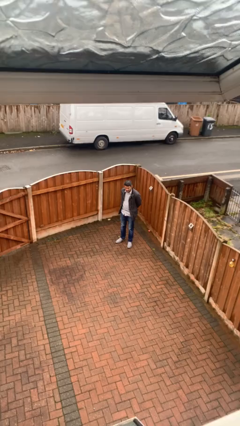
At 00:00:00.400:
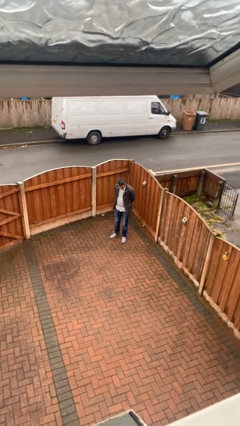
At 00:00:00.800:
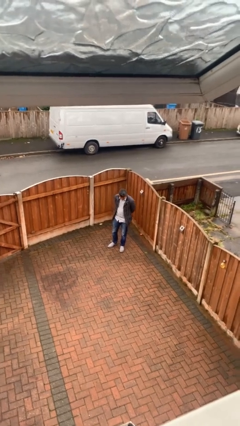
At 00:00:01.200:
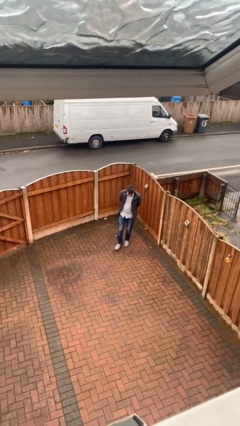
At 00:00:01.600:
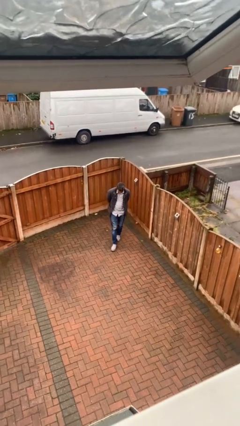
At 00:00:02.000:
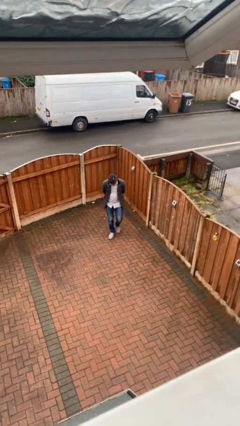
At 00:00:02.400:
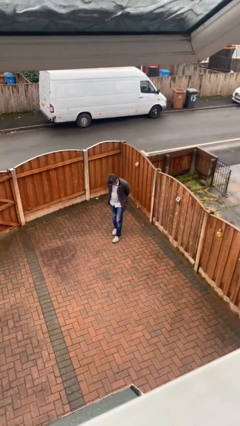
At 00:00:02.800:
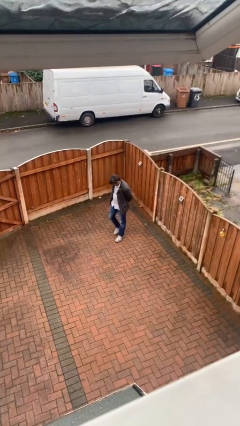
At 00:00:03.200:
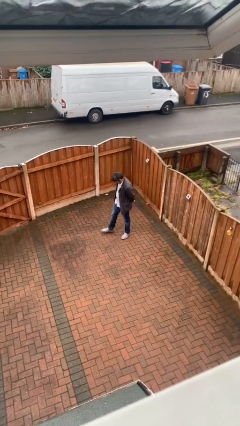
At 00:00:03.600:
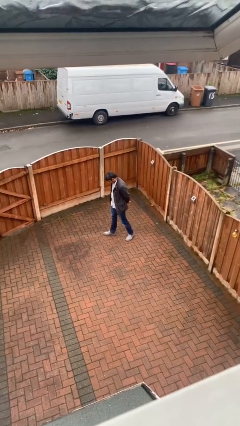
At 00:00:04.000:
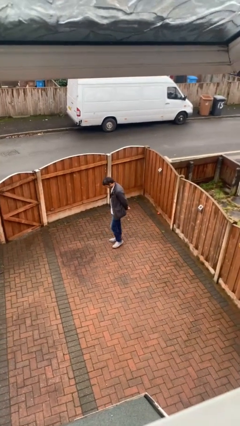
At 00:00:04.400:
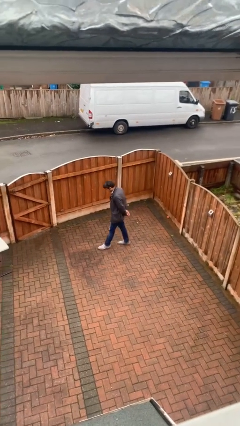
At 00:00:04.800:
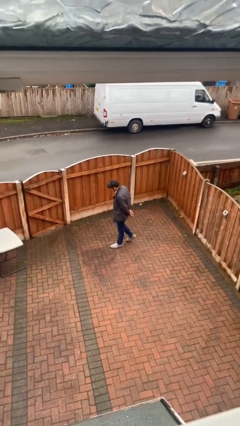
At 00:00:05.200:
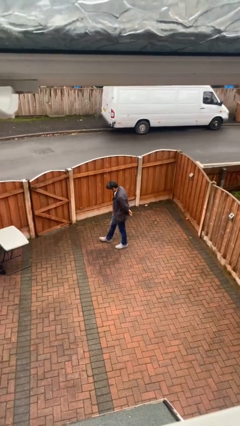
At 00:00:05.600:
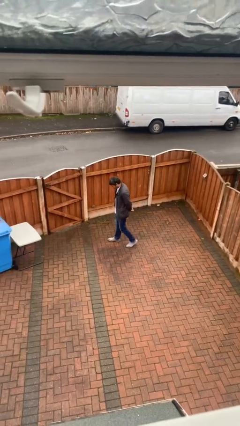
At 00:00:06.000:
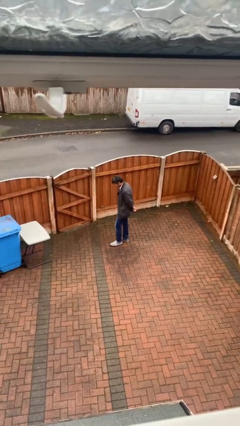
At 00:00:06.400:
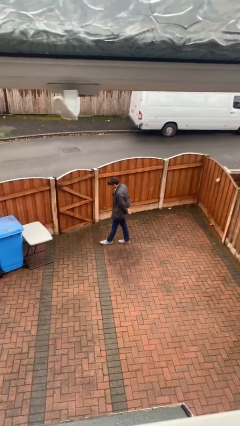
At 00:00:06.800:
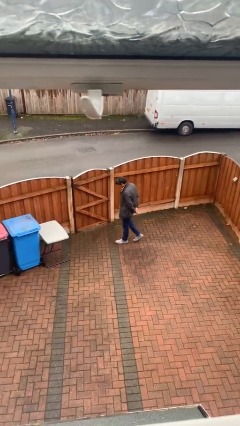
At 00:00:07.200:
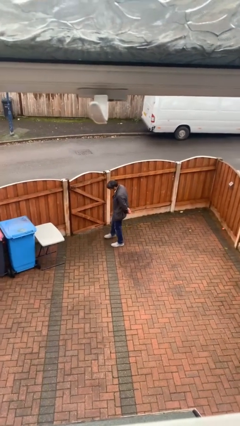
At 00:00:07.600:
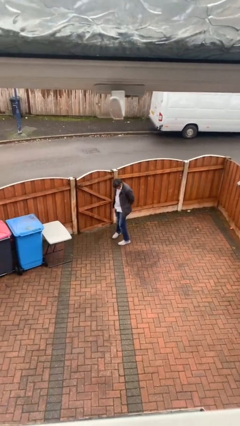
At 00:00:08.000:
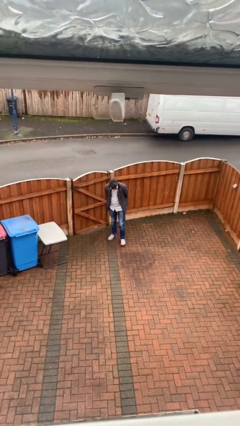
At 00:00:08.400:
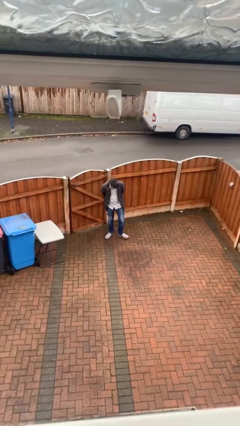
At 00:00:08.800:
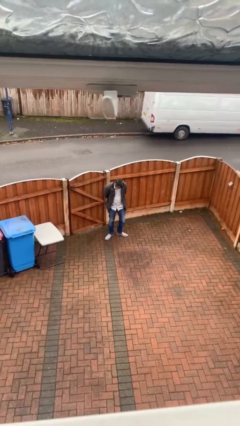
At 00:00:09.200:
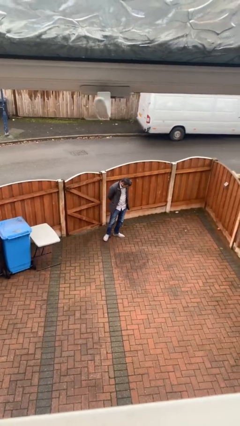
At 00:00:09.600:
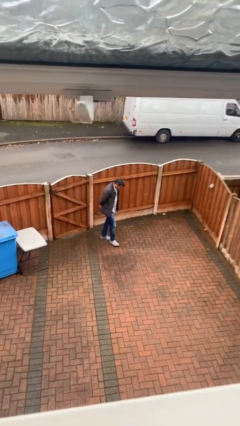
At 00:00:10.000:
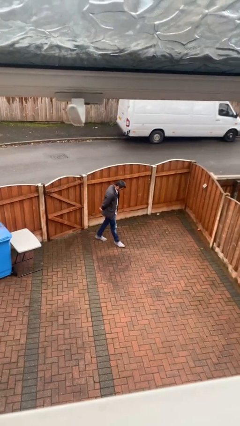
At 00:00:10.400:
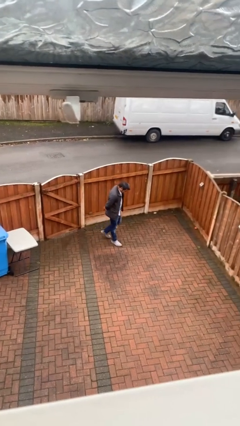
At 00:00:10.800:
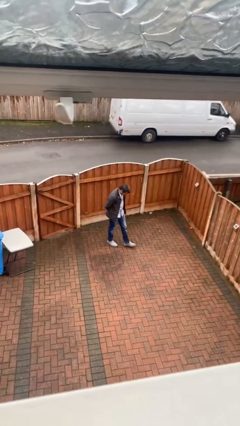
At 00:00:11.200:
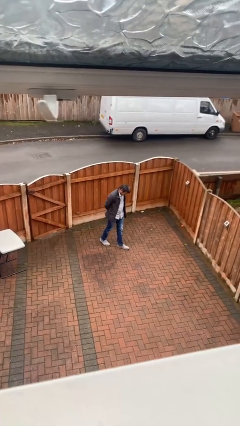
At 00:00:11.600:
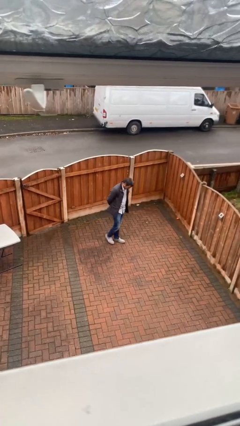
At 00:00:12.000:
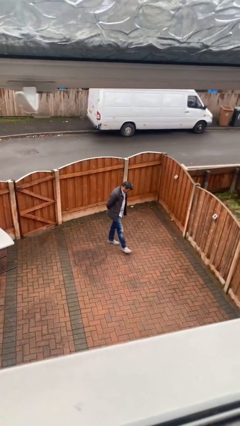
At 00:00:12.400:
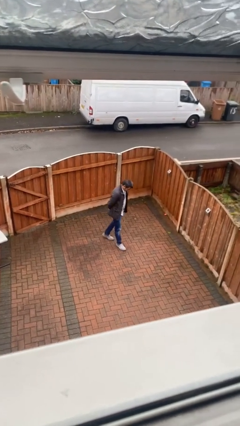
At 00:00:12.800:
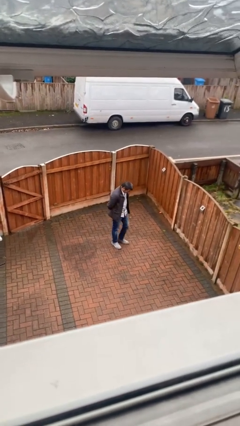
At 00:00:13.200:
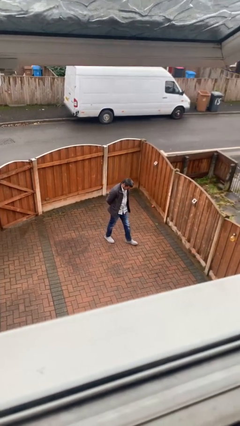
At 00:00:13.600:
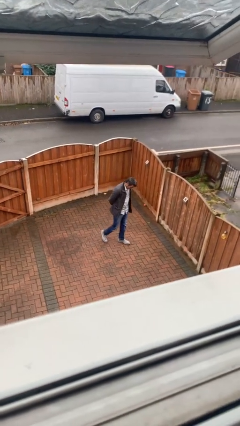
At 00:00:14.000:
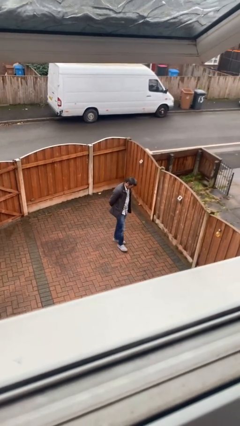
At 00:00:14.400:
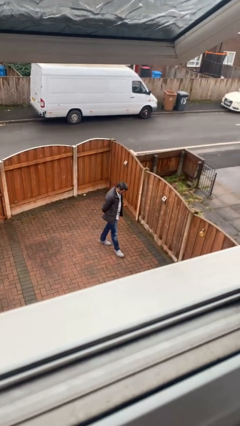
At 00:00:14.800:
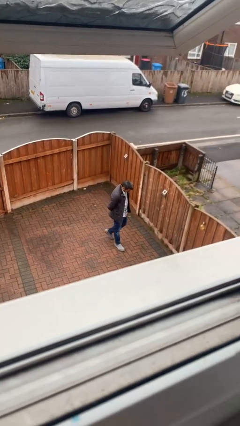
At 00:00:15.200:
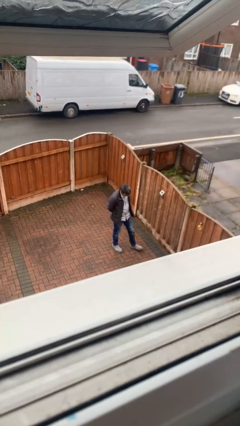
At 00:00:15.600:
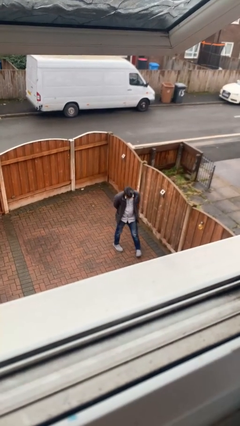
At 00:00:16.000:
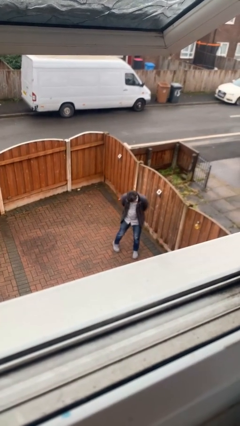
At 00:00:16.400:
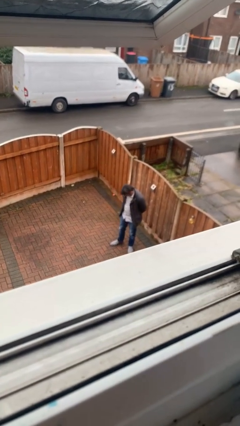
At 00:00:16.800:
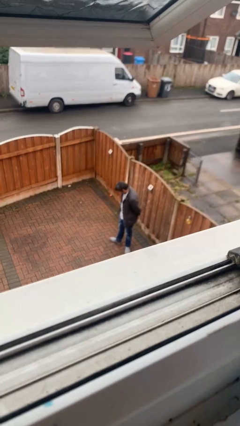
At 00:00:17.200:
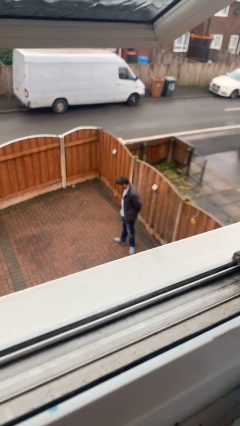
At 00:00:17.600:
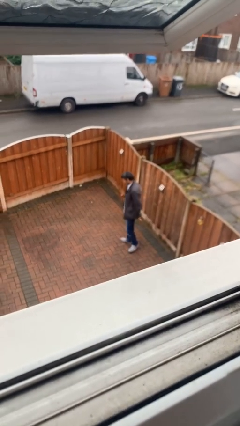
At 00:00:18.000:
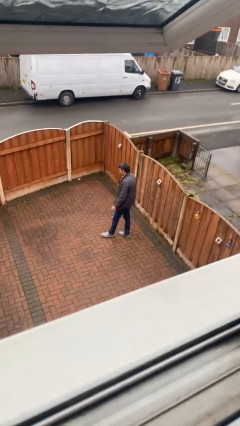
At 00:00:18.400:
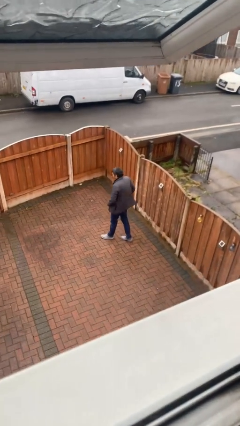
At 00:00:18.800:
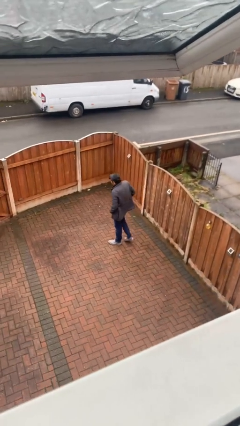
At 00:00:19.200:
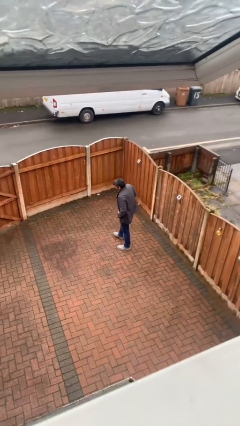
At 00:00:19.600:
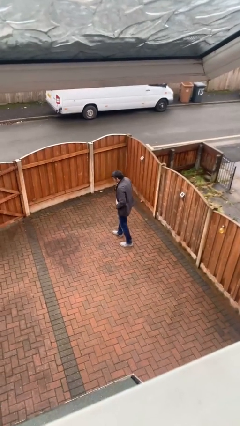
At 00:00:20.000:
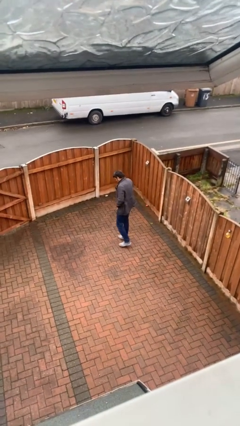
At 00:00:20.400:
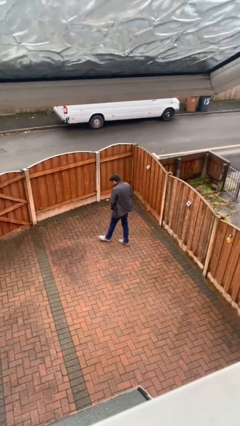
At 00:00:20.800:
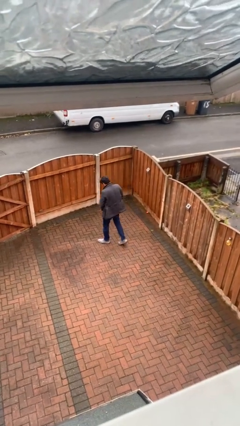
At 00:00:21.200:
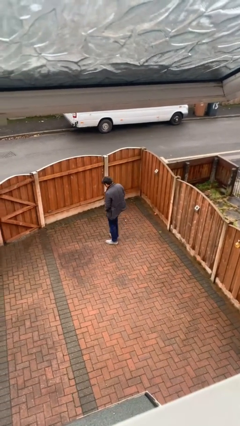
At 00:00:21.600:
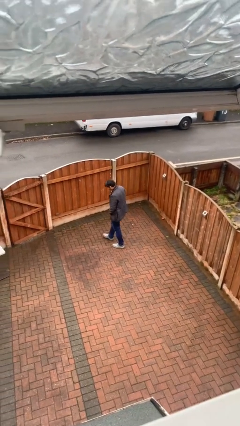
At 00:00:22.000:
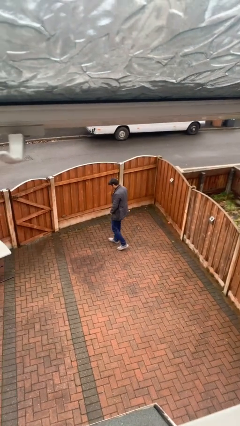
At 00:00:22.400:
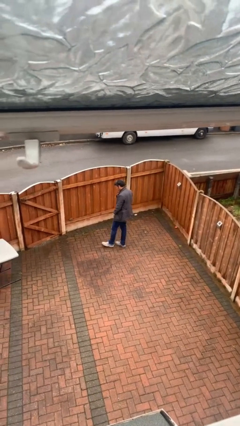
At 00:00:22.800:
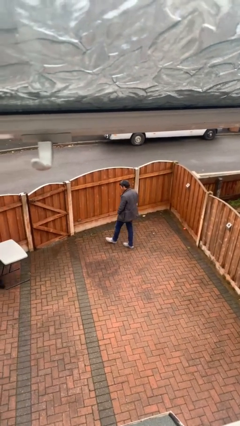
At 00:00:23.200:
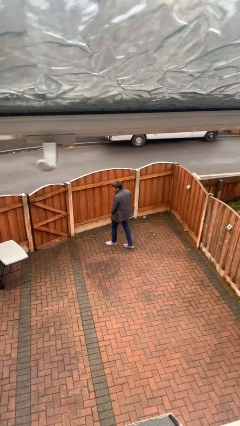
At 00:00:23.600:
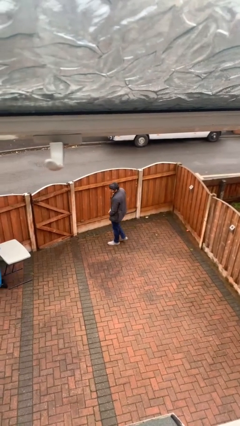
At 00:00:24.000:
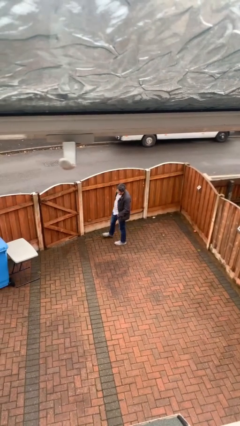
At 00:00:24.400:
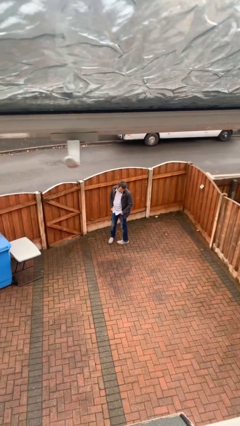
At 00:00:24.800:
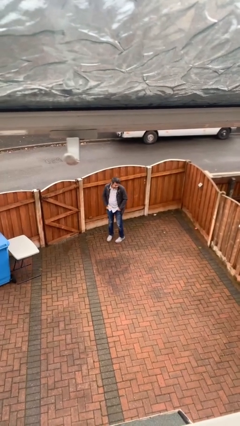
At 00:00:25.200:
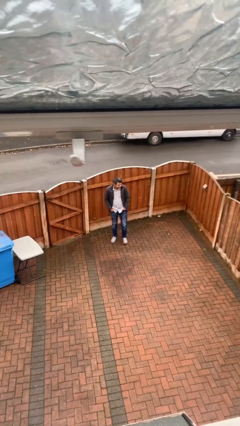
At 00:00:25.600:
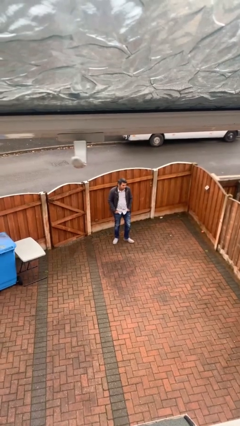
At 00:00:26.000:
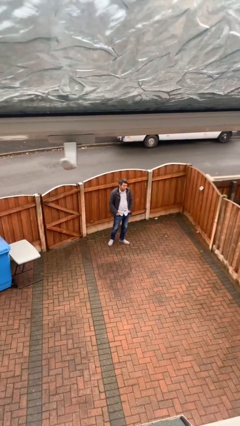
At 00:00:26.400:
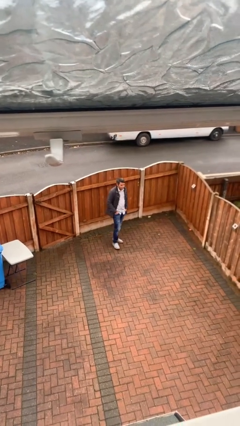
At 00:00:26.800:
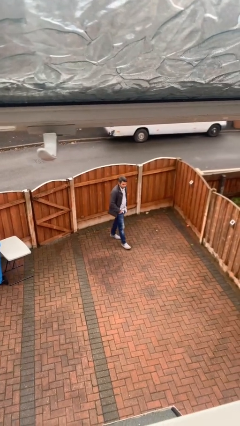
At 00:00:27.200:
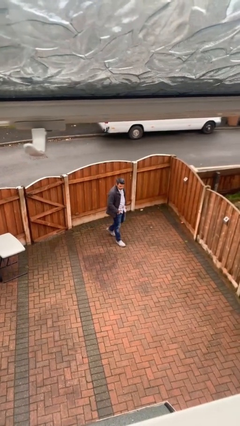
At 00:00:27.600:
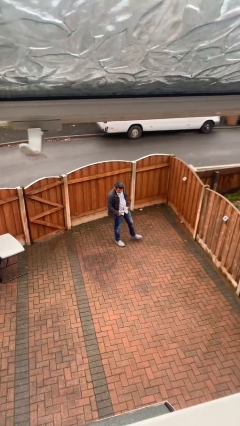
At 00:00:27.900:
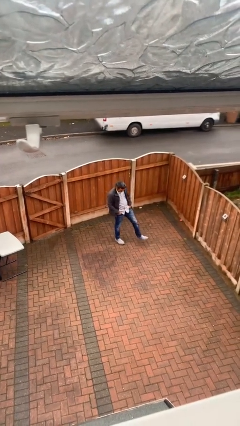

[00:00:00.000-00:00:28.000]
person walks

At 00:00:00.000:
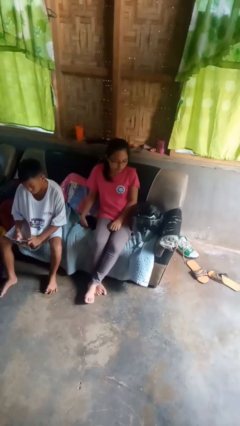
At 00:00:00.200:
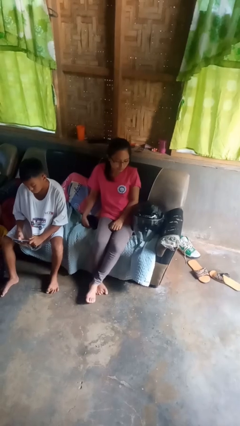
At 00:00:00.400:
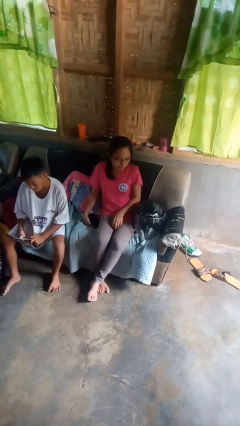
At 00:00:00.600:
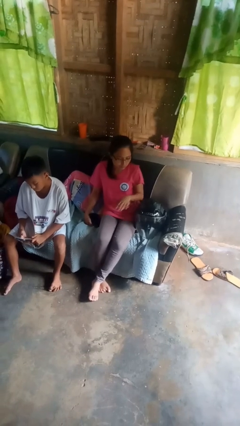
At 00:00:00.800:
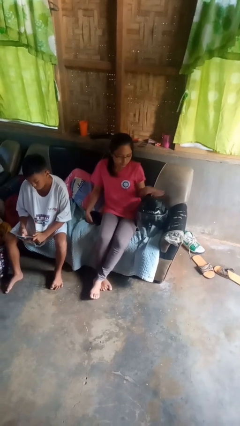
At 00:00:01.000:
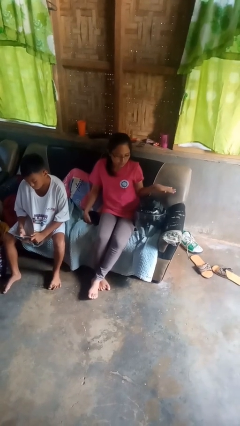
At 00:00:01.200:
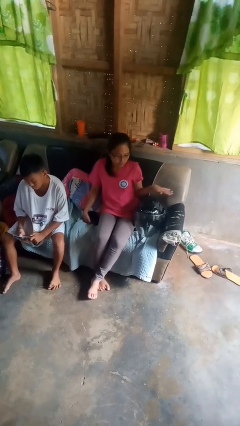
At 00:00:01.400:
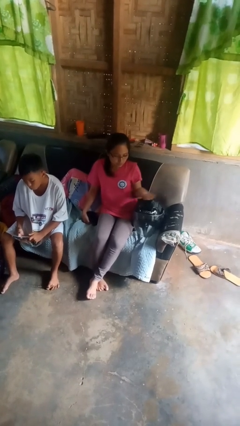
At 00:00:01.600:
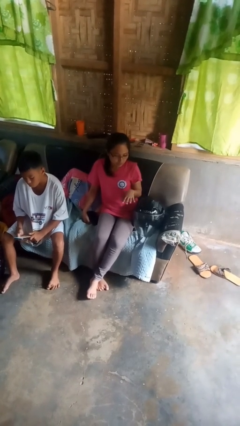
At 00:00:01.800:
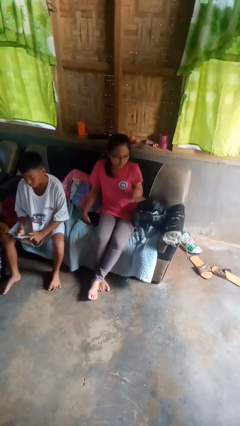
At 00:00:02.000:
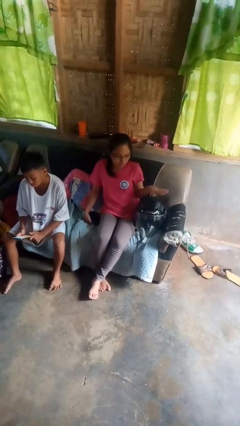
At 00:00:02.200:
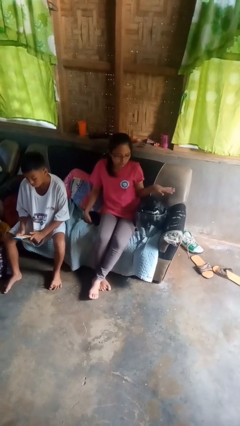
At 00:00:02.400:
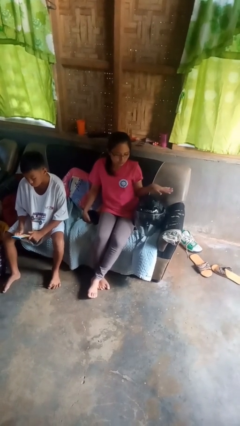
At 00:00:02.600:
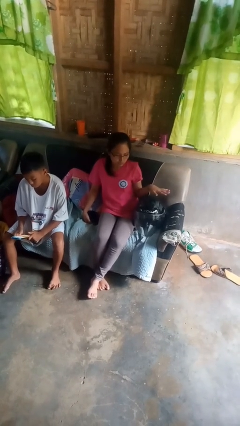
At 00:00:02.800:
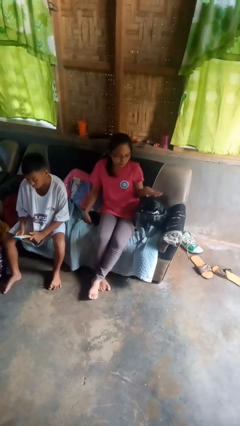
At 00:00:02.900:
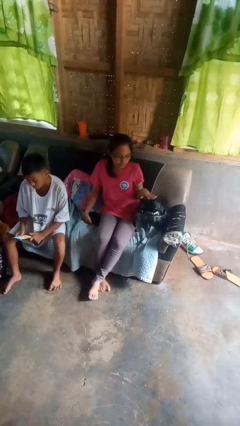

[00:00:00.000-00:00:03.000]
person waves hand over object

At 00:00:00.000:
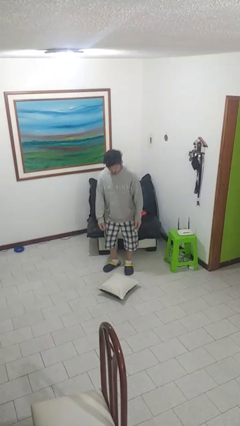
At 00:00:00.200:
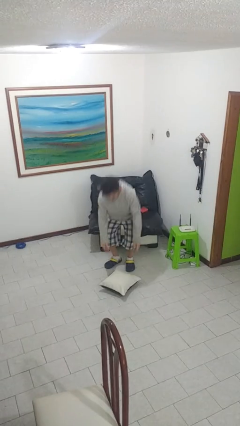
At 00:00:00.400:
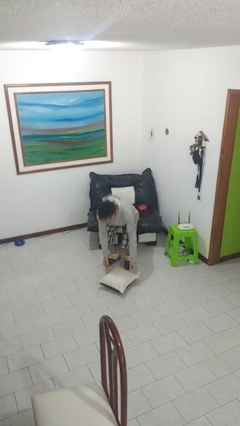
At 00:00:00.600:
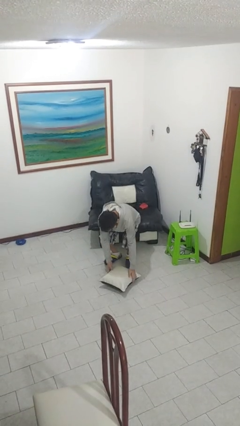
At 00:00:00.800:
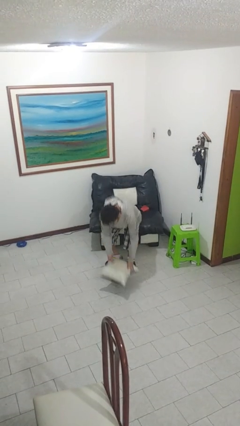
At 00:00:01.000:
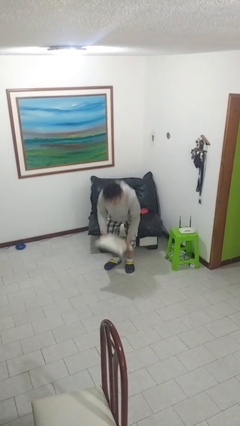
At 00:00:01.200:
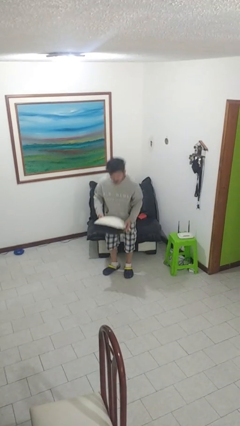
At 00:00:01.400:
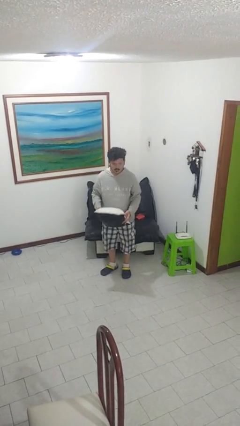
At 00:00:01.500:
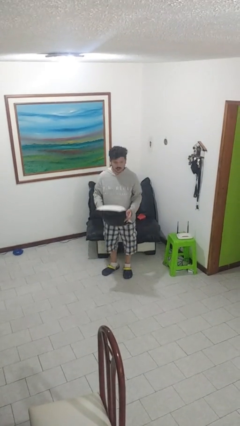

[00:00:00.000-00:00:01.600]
person picks up object from floor
